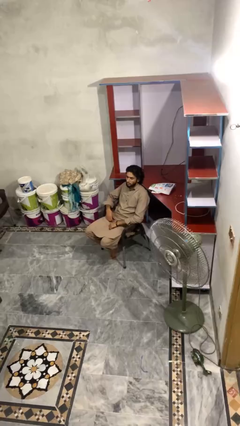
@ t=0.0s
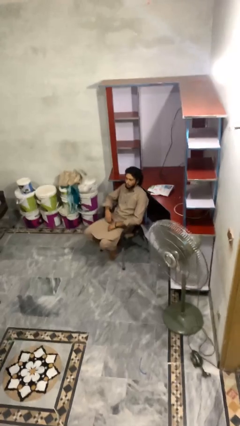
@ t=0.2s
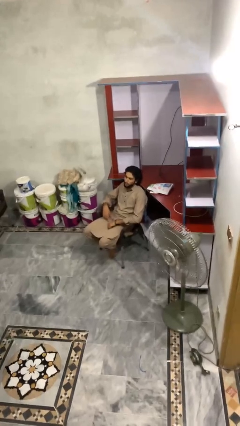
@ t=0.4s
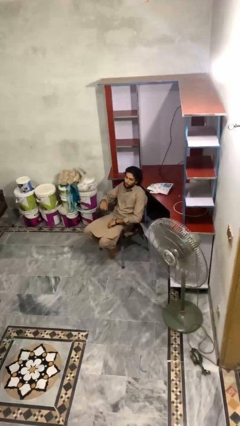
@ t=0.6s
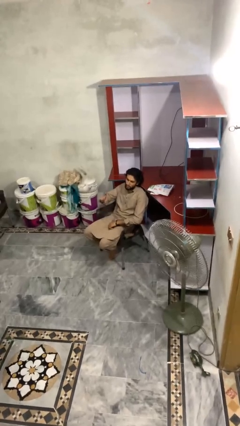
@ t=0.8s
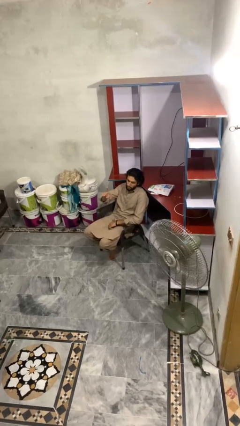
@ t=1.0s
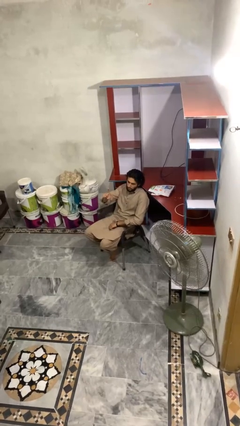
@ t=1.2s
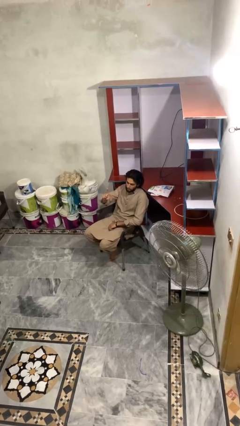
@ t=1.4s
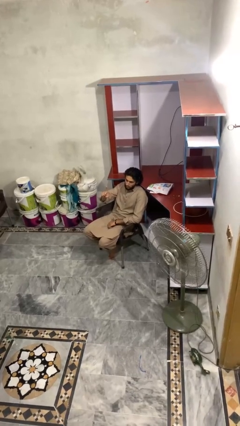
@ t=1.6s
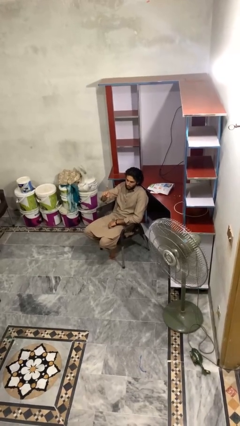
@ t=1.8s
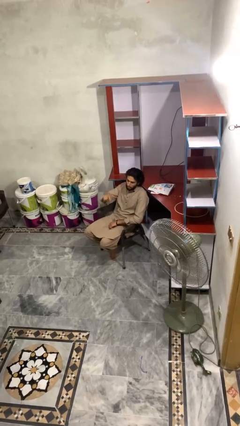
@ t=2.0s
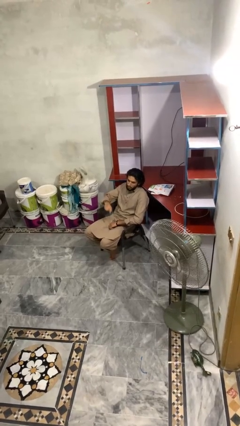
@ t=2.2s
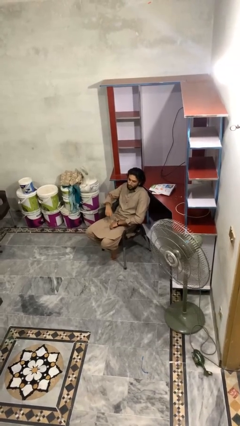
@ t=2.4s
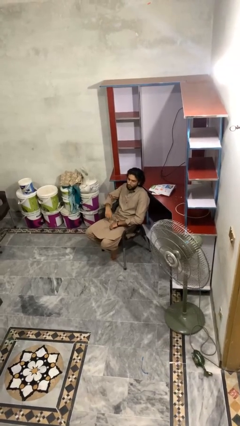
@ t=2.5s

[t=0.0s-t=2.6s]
person gestures number one

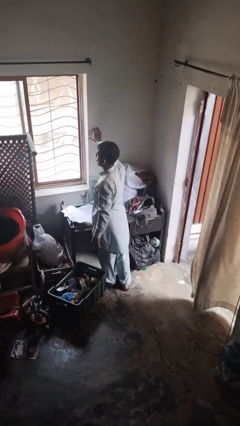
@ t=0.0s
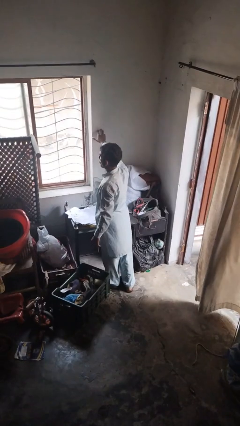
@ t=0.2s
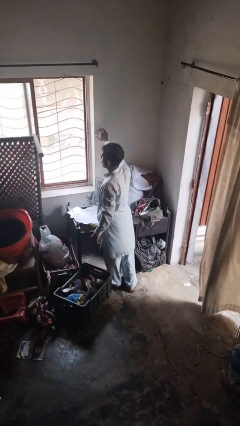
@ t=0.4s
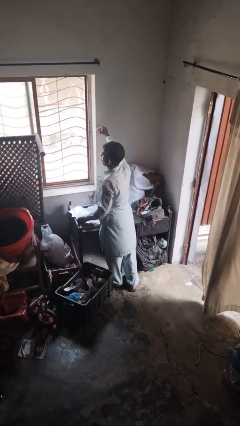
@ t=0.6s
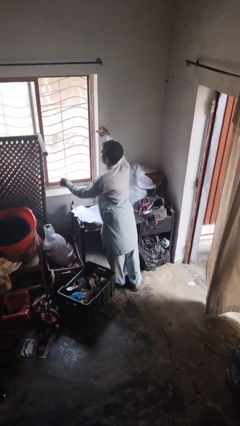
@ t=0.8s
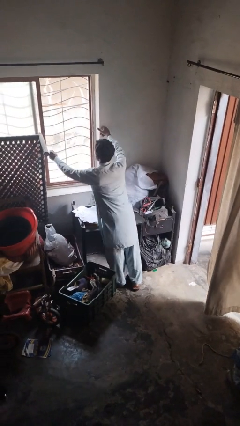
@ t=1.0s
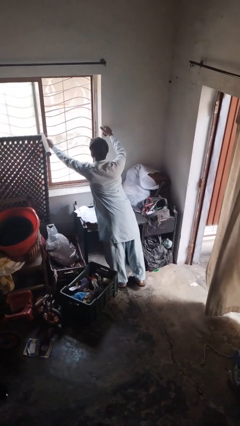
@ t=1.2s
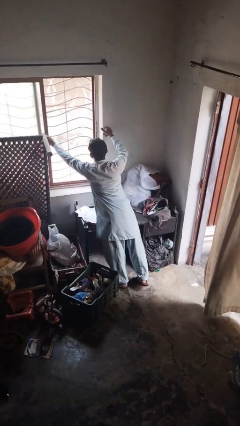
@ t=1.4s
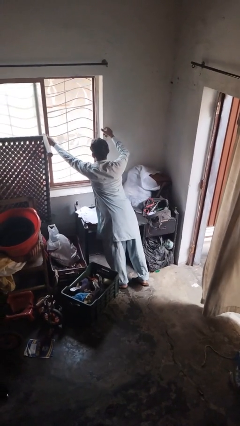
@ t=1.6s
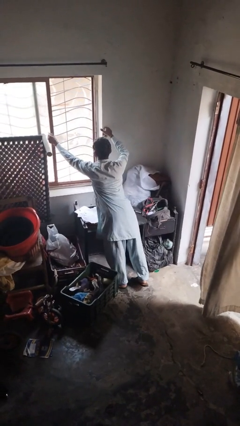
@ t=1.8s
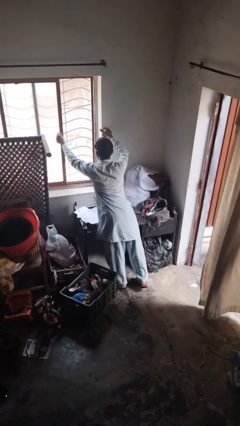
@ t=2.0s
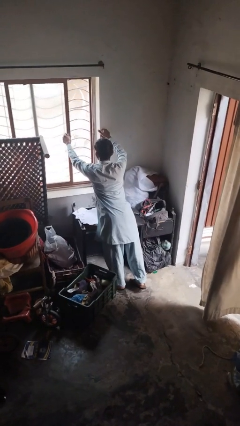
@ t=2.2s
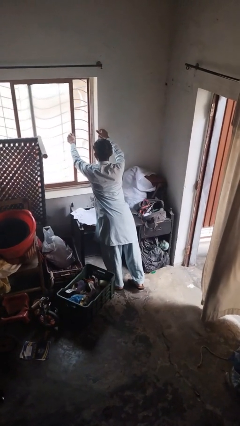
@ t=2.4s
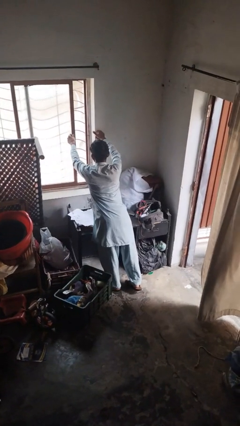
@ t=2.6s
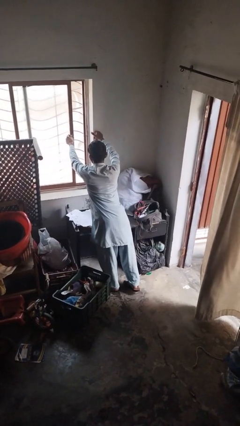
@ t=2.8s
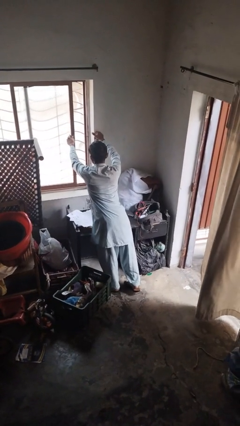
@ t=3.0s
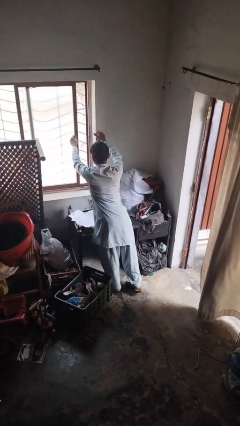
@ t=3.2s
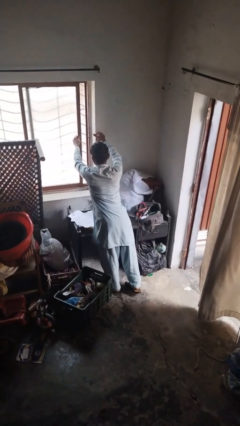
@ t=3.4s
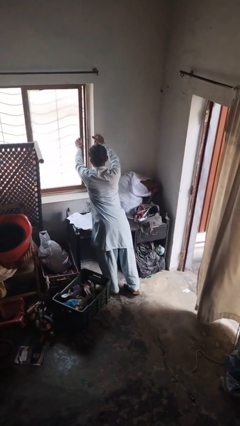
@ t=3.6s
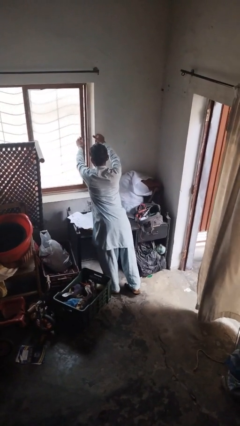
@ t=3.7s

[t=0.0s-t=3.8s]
person closes home window

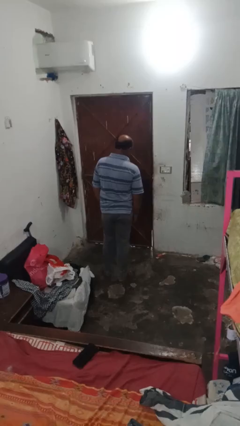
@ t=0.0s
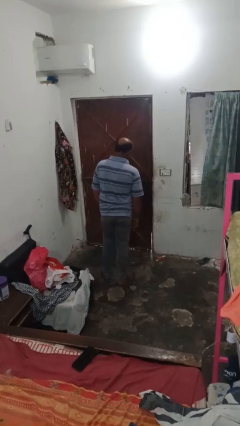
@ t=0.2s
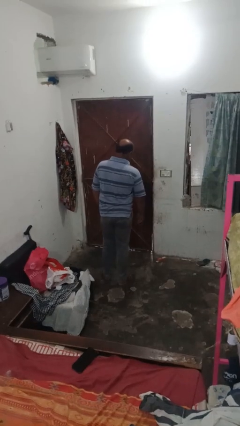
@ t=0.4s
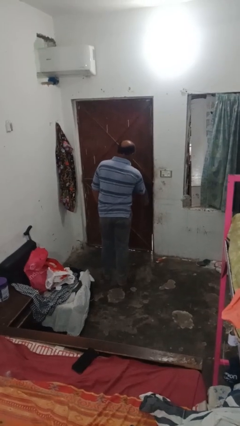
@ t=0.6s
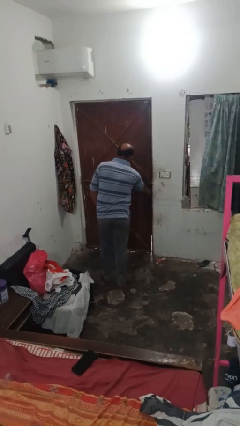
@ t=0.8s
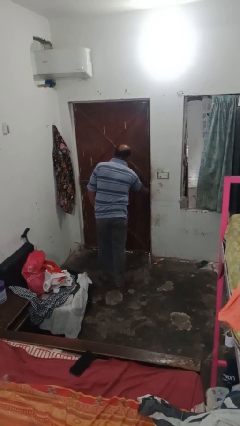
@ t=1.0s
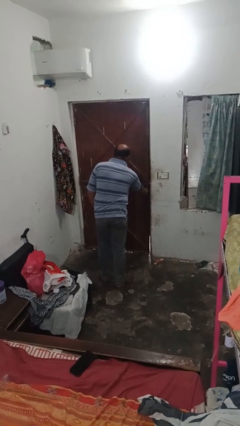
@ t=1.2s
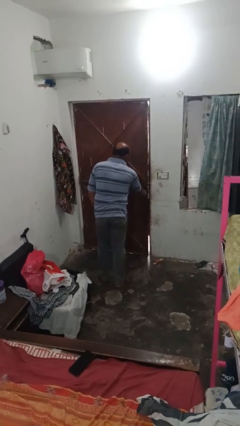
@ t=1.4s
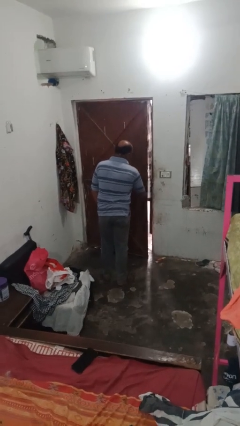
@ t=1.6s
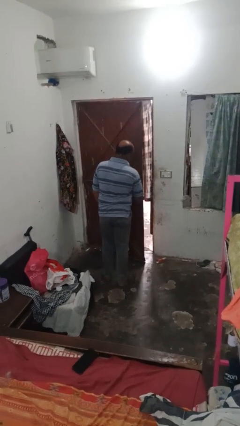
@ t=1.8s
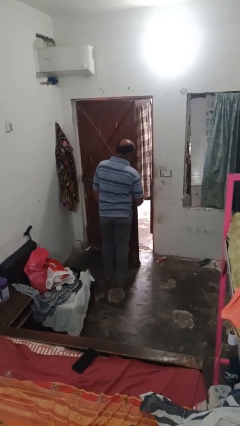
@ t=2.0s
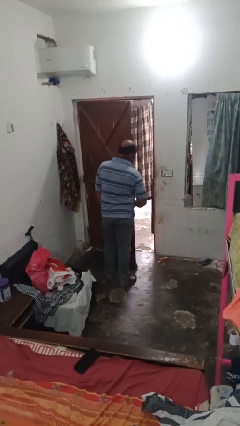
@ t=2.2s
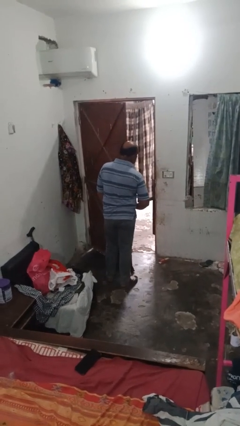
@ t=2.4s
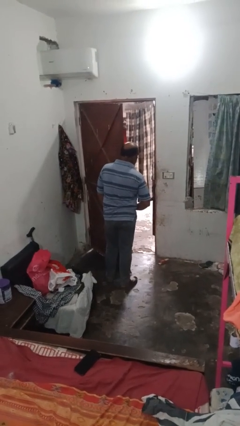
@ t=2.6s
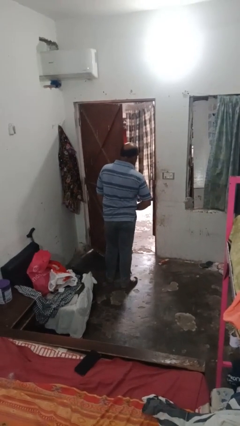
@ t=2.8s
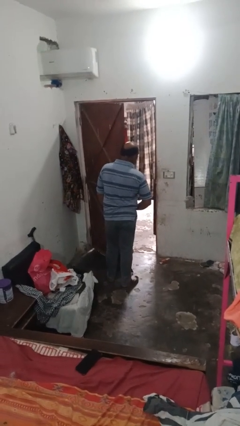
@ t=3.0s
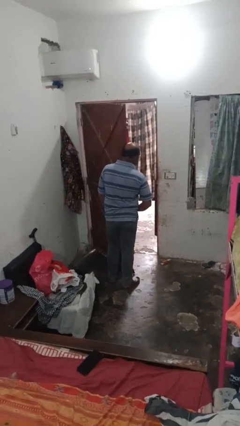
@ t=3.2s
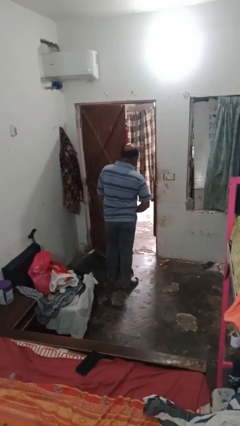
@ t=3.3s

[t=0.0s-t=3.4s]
person opens closet door

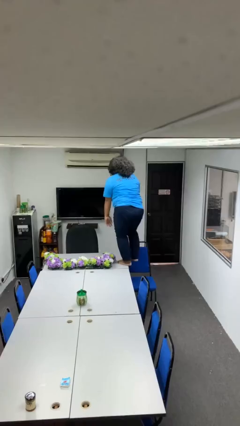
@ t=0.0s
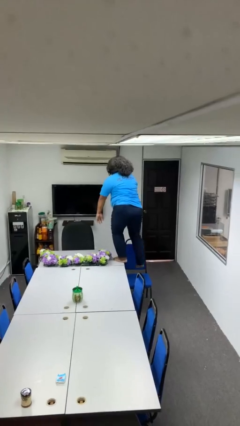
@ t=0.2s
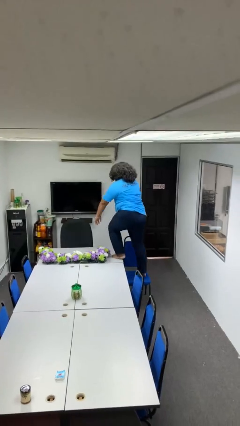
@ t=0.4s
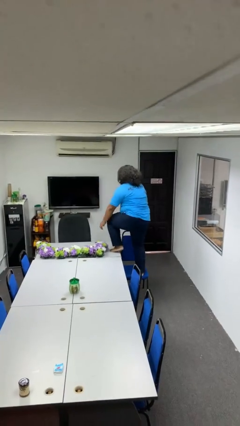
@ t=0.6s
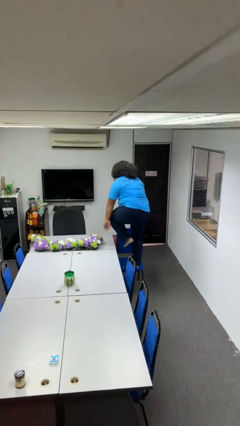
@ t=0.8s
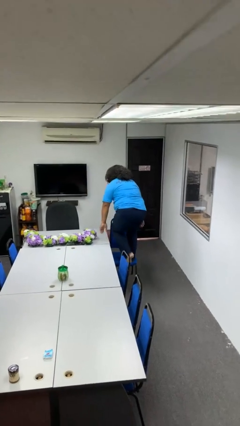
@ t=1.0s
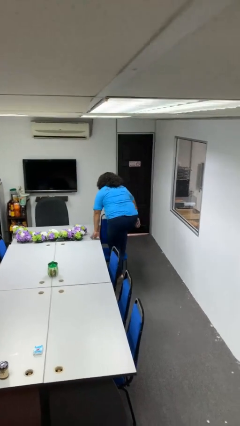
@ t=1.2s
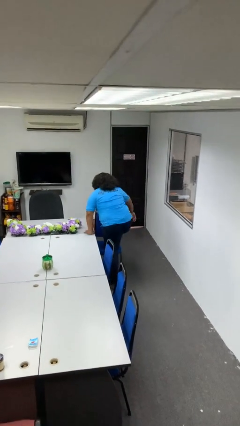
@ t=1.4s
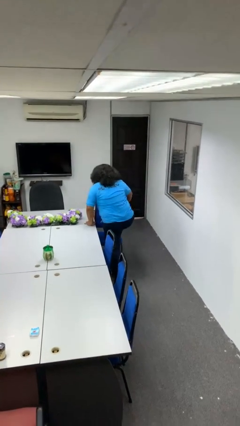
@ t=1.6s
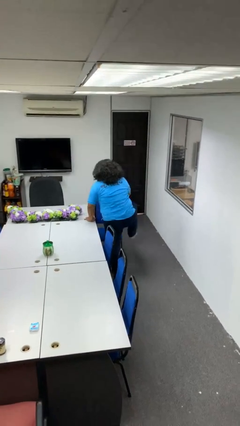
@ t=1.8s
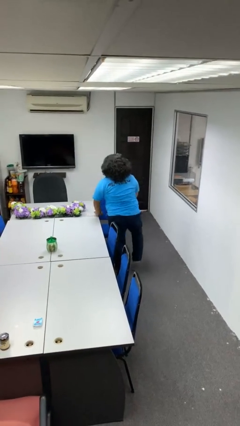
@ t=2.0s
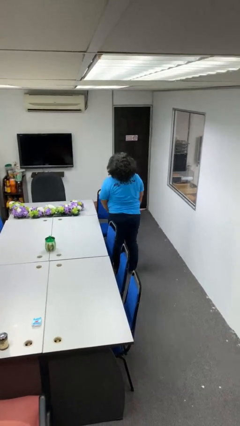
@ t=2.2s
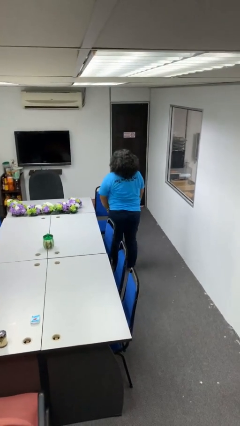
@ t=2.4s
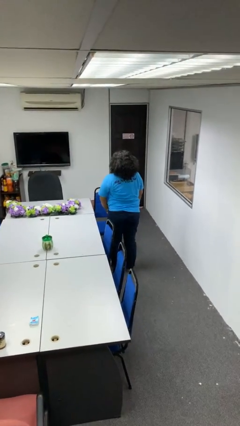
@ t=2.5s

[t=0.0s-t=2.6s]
person climbs off table

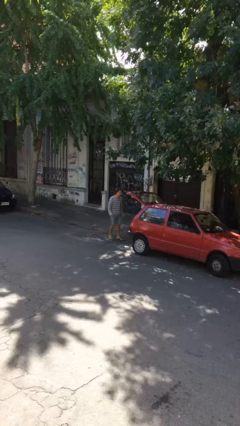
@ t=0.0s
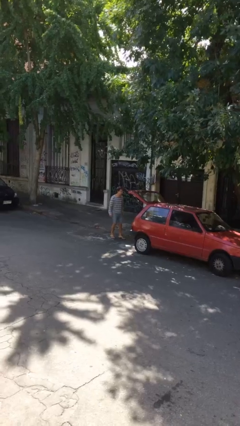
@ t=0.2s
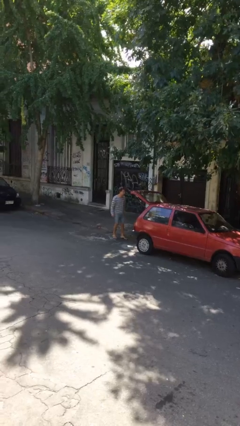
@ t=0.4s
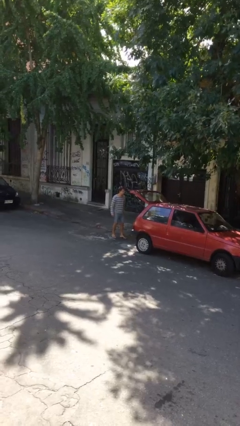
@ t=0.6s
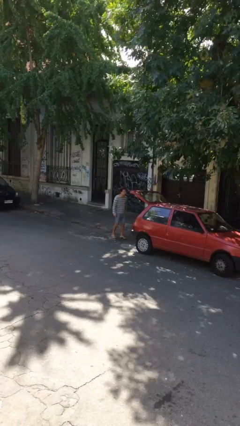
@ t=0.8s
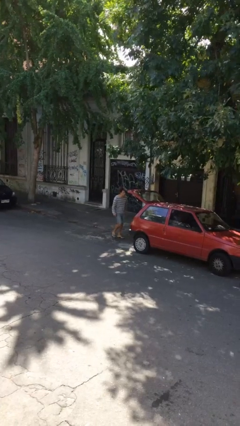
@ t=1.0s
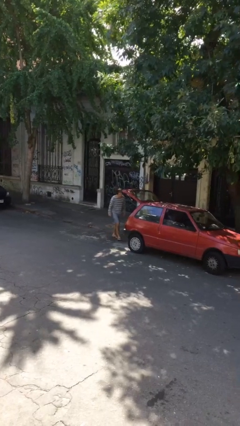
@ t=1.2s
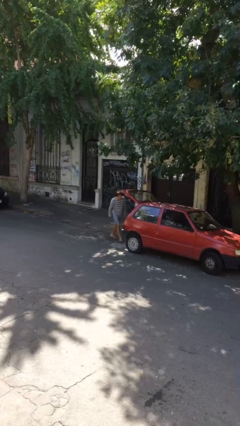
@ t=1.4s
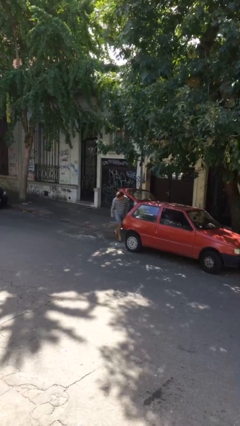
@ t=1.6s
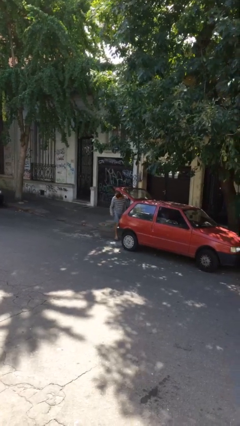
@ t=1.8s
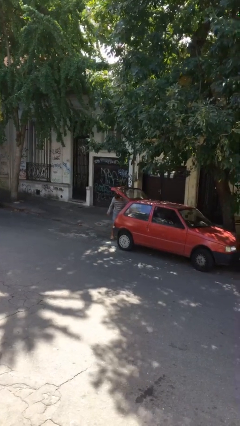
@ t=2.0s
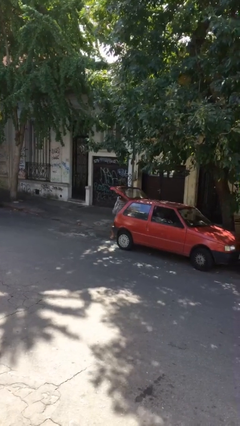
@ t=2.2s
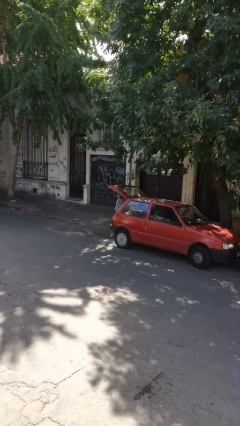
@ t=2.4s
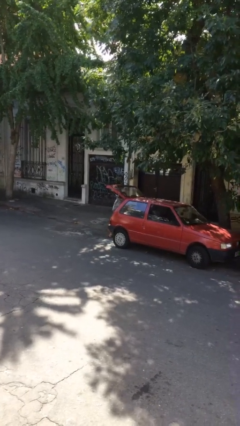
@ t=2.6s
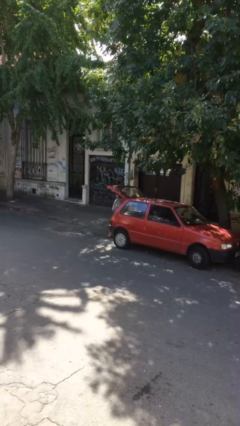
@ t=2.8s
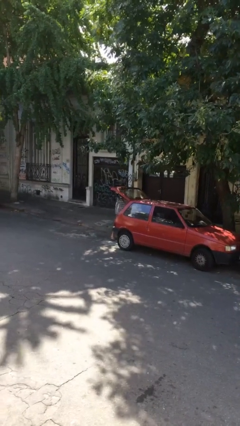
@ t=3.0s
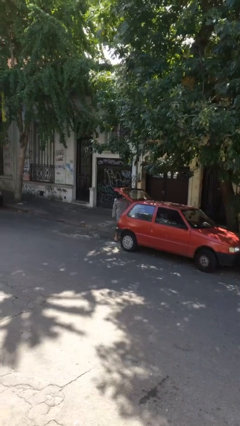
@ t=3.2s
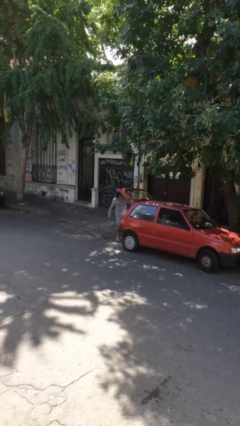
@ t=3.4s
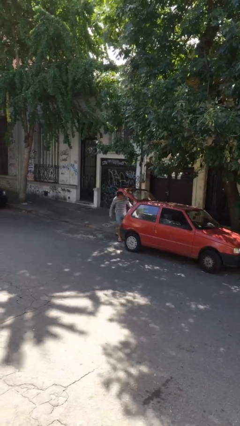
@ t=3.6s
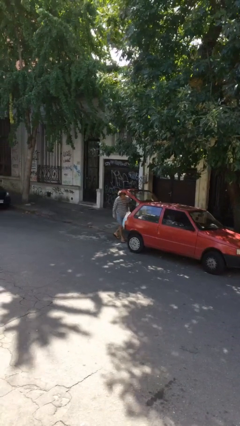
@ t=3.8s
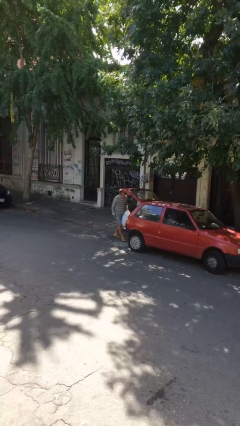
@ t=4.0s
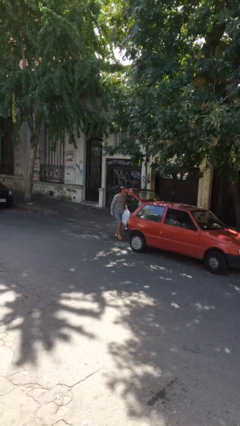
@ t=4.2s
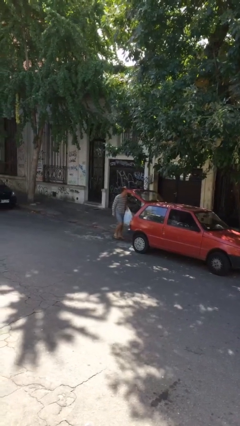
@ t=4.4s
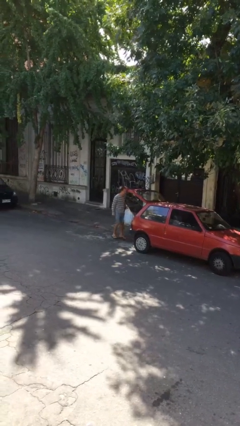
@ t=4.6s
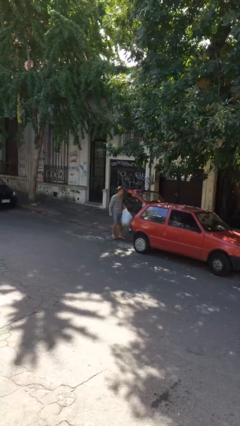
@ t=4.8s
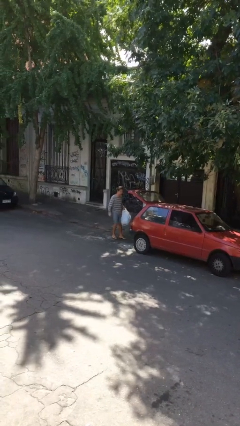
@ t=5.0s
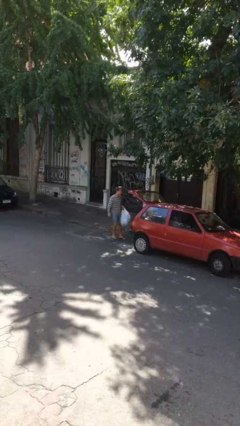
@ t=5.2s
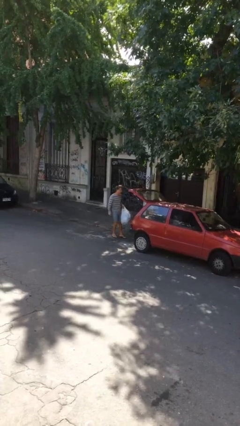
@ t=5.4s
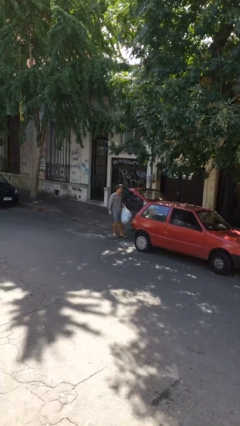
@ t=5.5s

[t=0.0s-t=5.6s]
person unloads car
